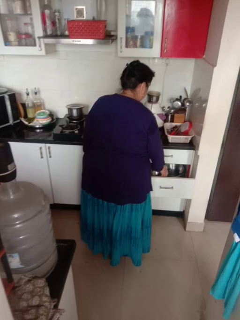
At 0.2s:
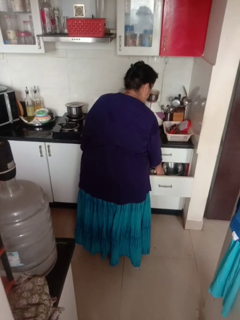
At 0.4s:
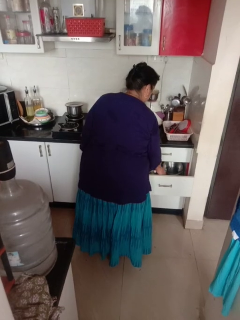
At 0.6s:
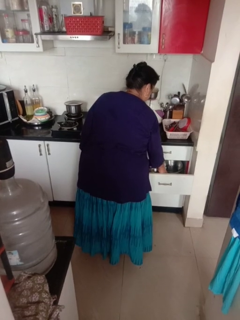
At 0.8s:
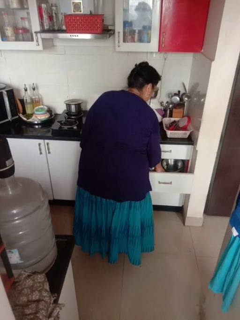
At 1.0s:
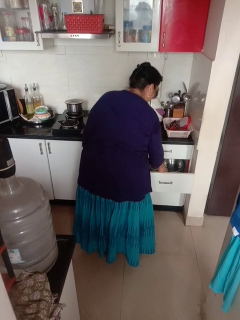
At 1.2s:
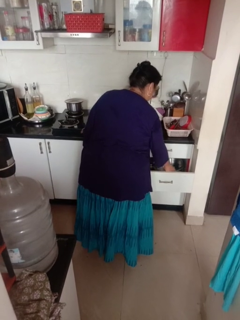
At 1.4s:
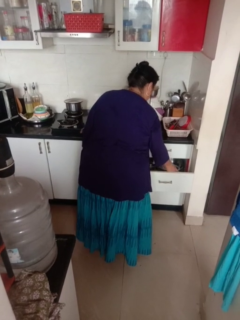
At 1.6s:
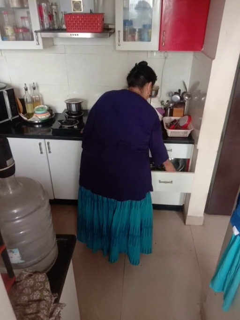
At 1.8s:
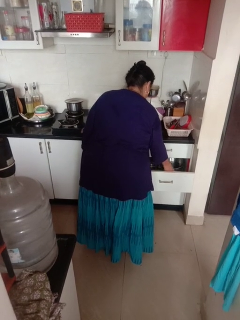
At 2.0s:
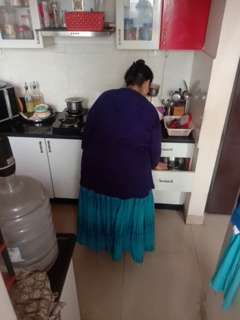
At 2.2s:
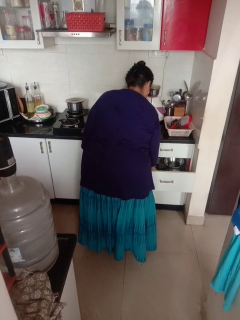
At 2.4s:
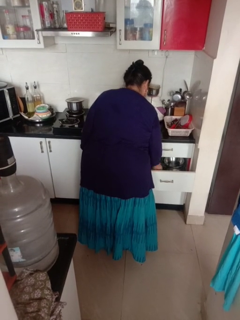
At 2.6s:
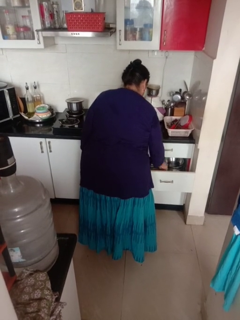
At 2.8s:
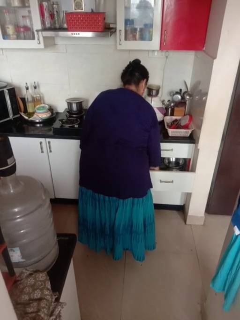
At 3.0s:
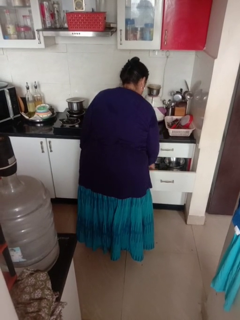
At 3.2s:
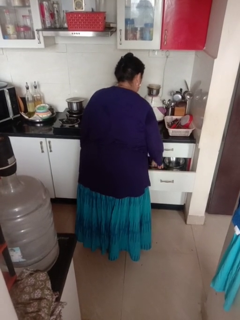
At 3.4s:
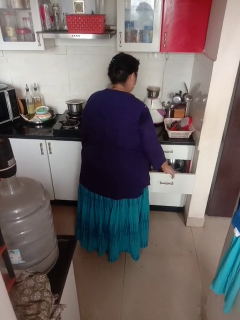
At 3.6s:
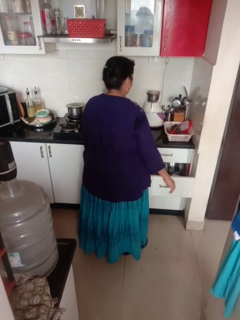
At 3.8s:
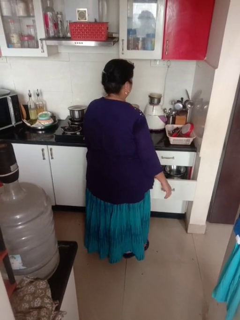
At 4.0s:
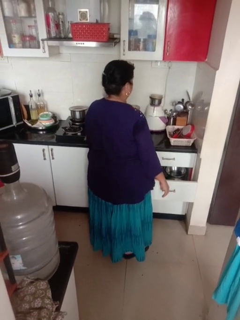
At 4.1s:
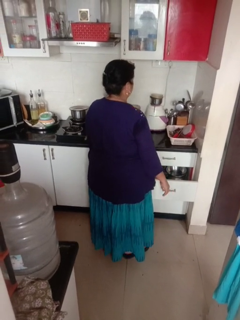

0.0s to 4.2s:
person searches in kitchen drawer

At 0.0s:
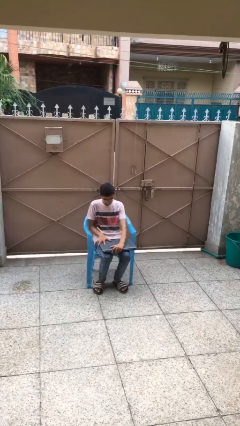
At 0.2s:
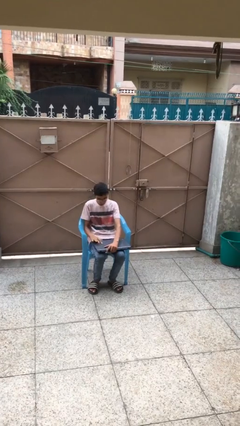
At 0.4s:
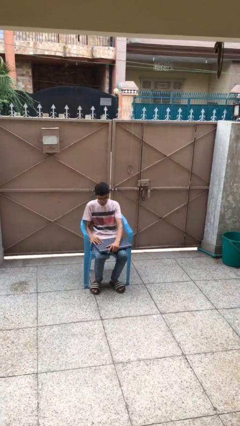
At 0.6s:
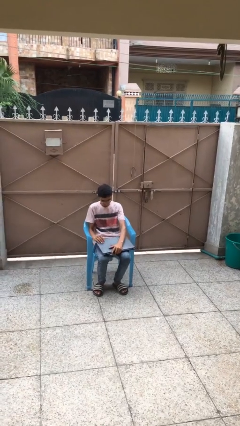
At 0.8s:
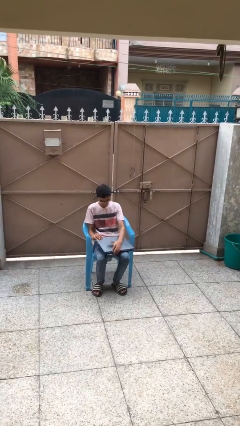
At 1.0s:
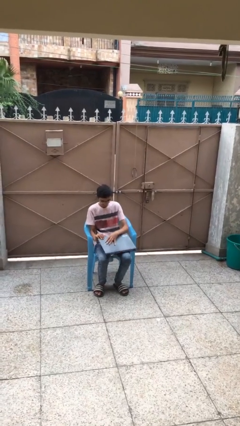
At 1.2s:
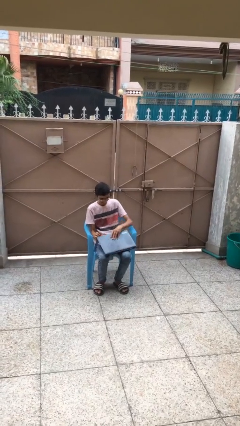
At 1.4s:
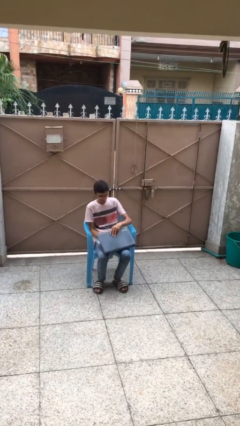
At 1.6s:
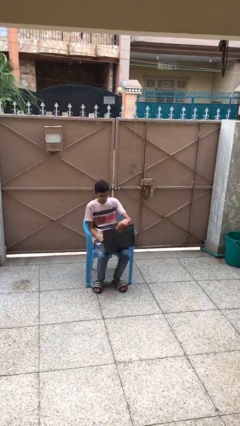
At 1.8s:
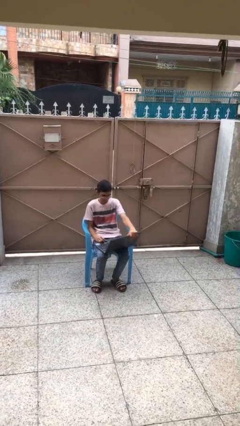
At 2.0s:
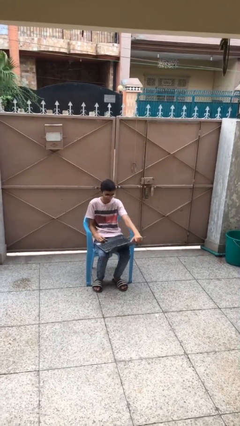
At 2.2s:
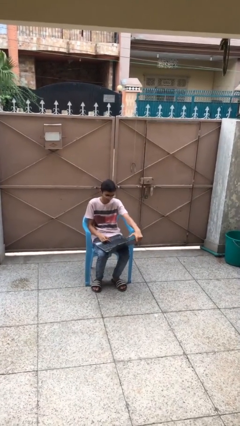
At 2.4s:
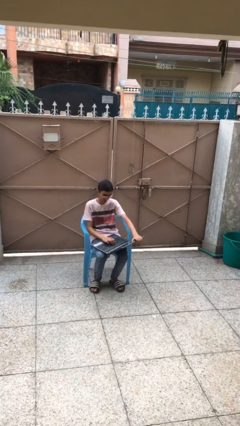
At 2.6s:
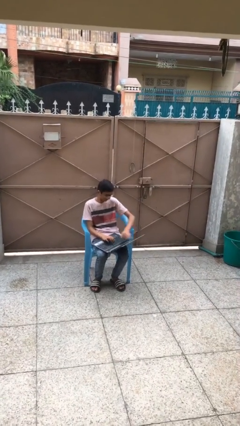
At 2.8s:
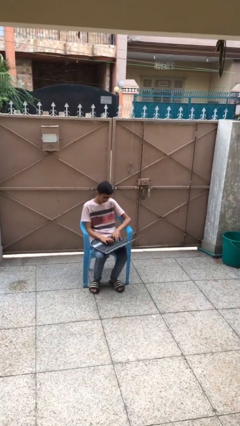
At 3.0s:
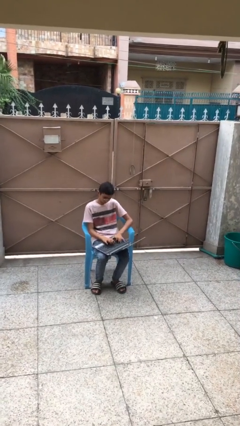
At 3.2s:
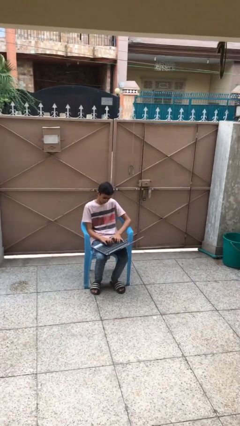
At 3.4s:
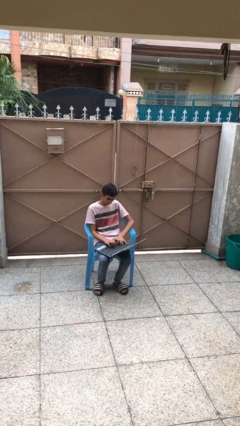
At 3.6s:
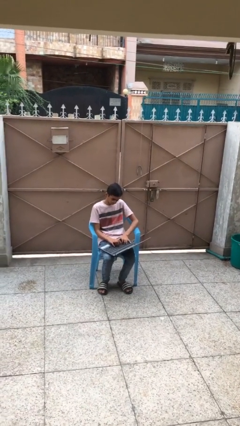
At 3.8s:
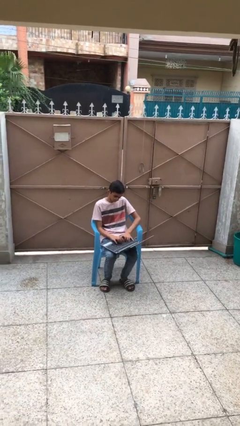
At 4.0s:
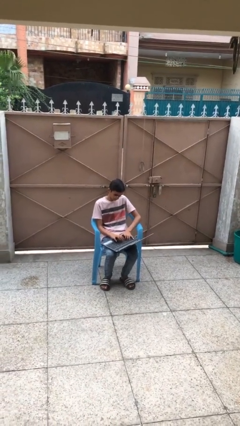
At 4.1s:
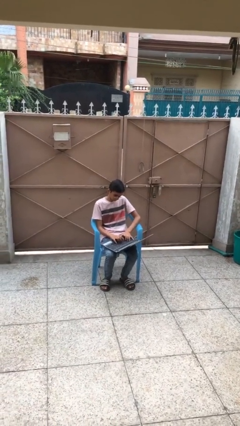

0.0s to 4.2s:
person interacts with laptop

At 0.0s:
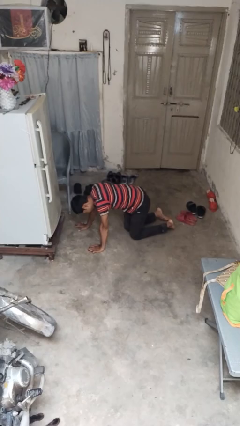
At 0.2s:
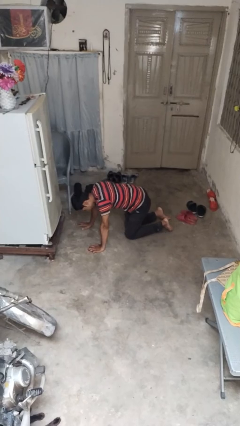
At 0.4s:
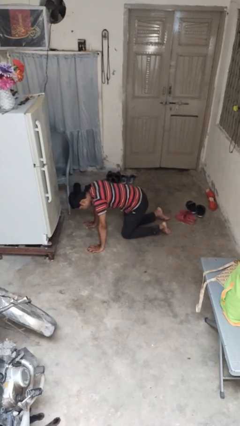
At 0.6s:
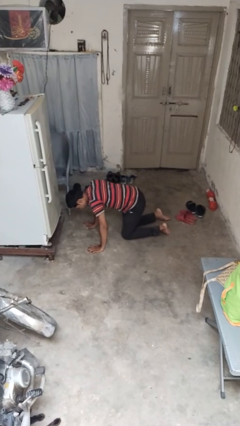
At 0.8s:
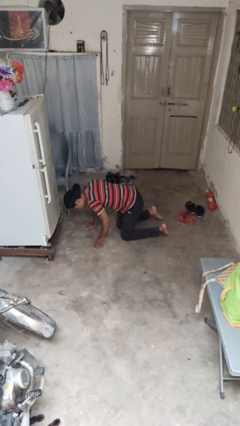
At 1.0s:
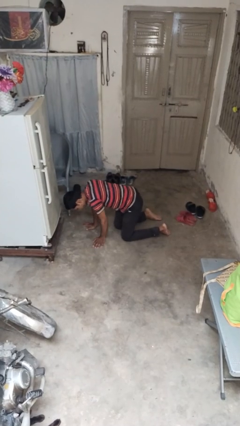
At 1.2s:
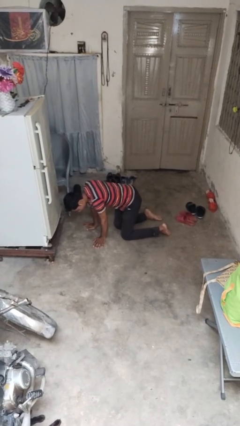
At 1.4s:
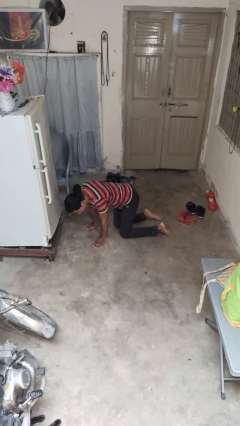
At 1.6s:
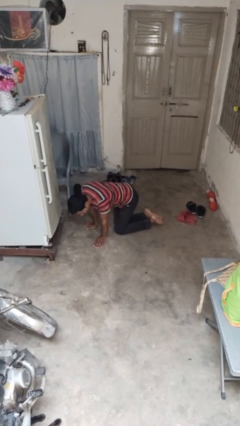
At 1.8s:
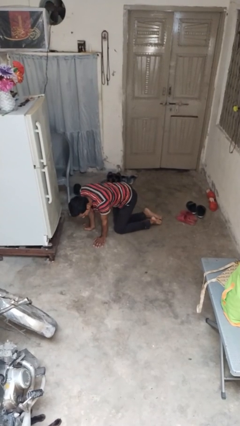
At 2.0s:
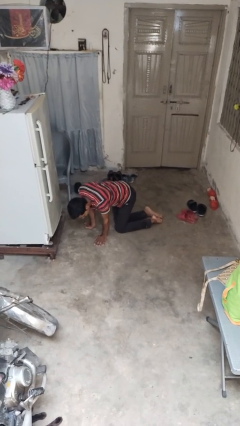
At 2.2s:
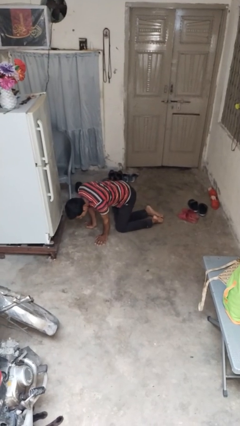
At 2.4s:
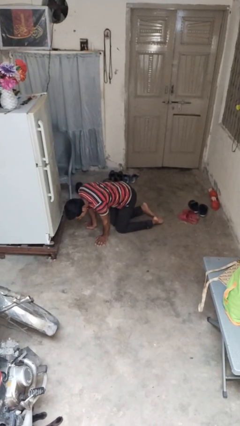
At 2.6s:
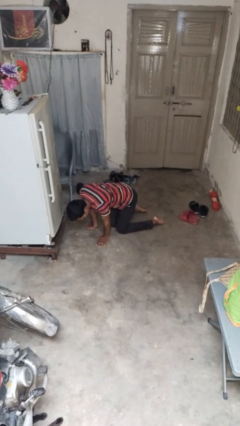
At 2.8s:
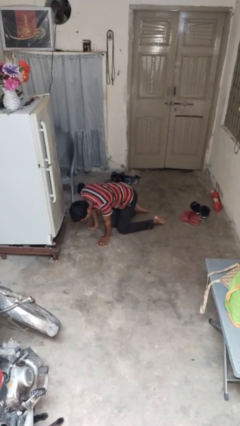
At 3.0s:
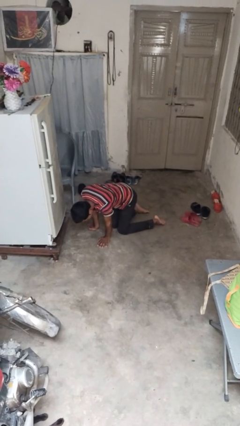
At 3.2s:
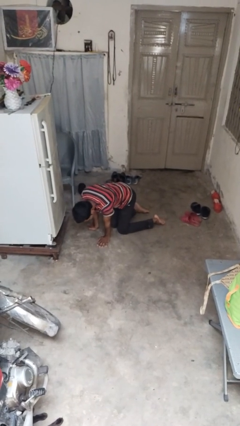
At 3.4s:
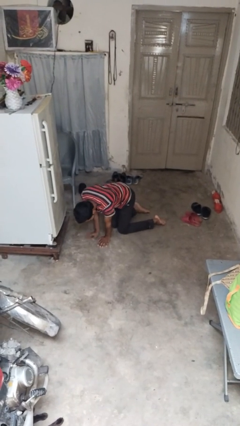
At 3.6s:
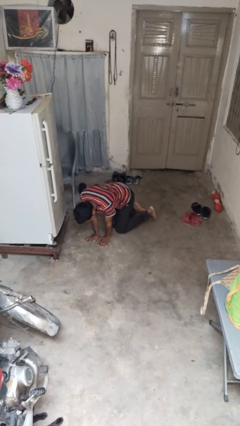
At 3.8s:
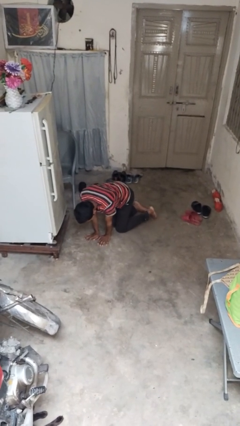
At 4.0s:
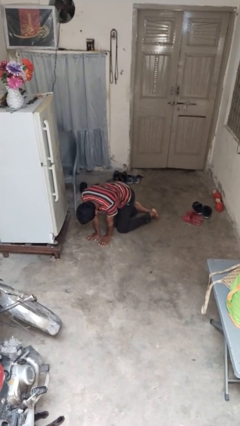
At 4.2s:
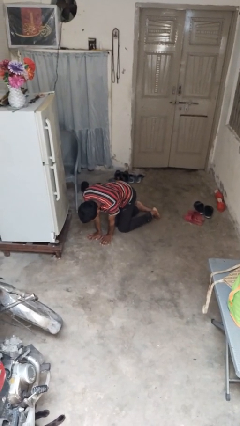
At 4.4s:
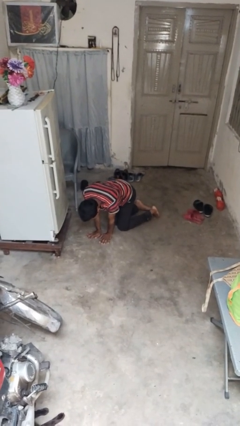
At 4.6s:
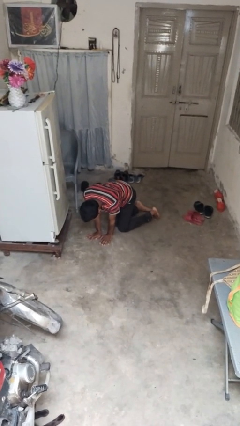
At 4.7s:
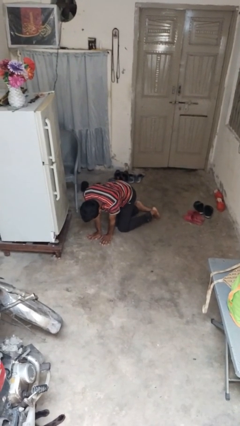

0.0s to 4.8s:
person crawls

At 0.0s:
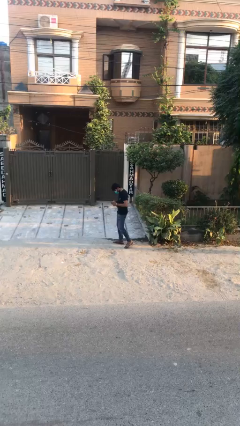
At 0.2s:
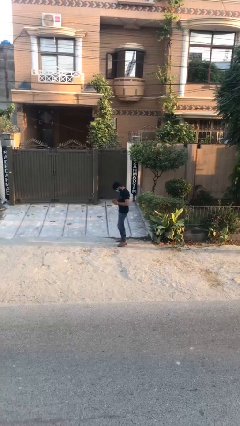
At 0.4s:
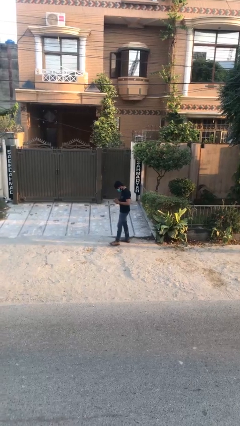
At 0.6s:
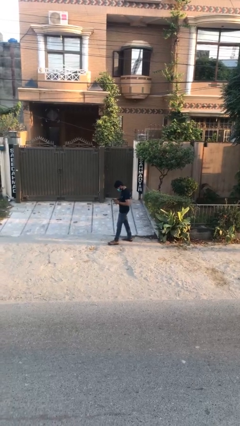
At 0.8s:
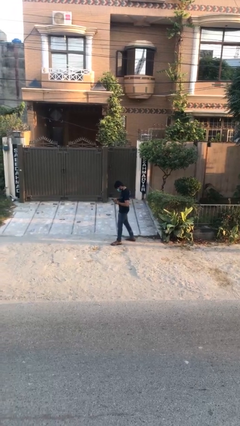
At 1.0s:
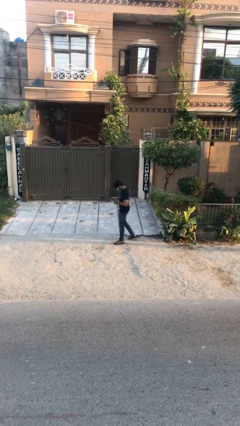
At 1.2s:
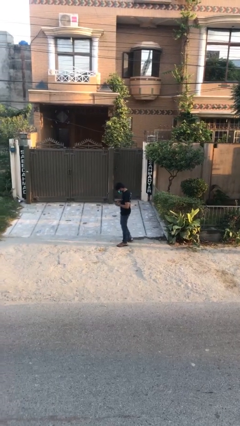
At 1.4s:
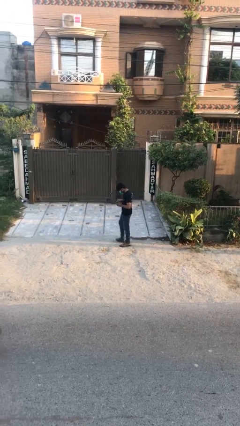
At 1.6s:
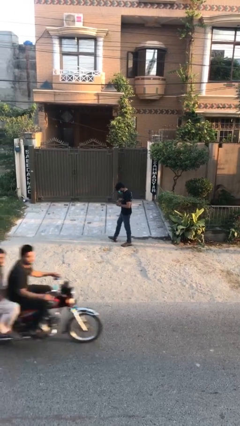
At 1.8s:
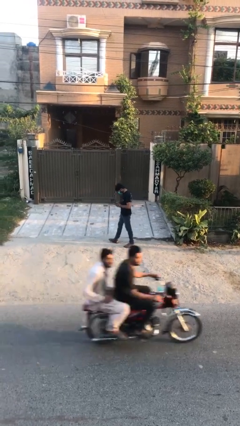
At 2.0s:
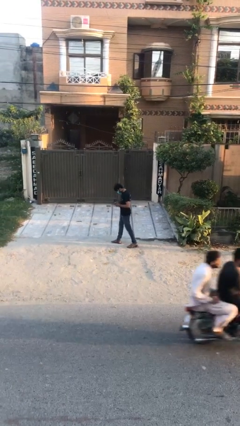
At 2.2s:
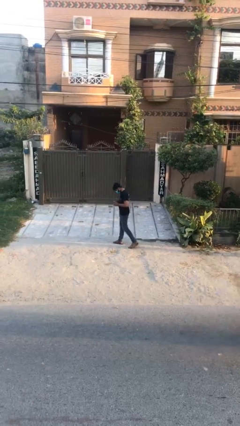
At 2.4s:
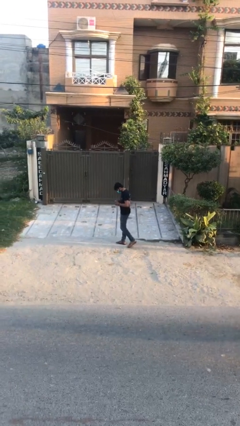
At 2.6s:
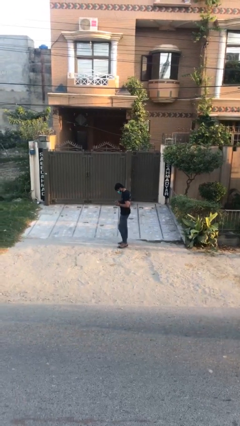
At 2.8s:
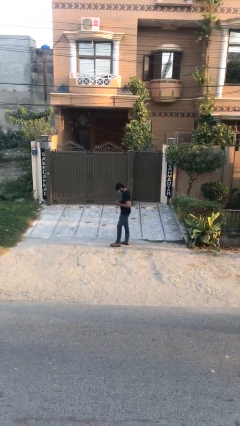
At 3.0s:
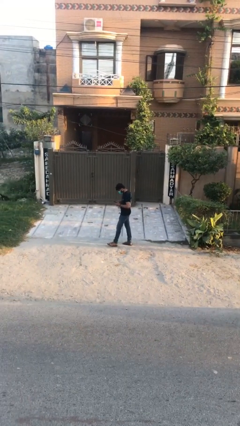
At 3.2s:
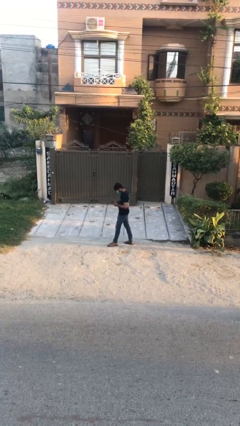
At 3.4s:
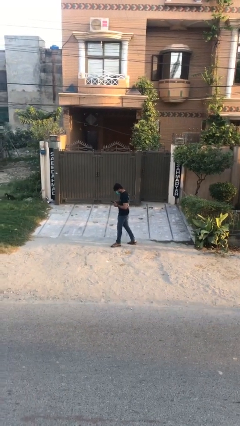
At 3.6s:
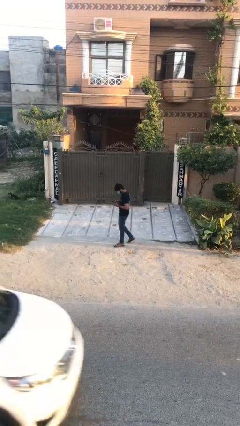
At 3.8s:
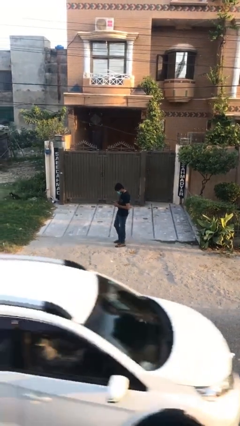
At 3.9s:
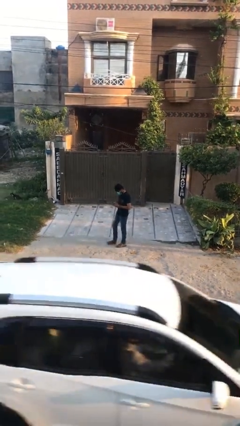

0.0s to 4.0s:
person texts on phone

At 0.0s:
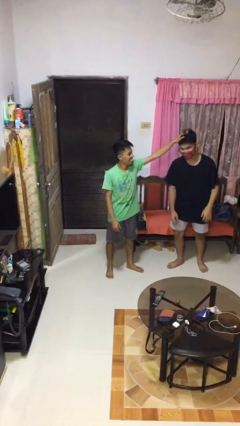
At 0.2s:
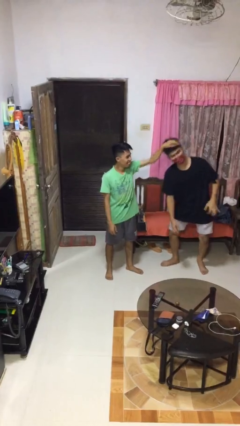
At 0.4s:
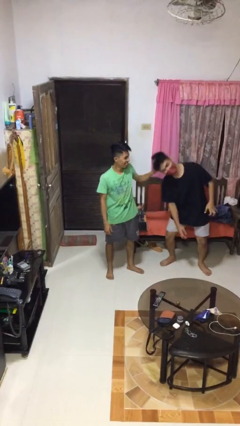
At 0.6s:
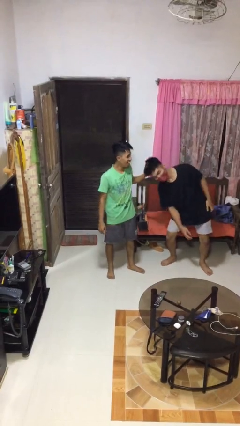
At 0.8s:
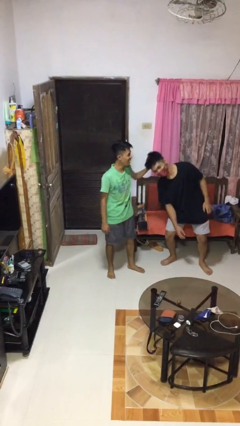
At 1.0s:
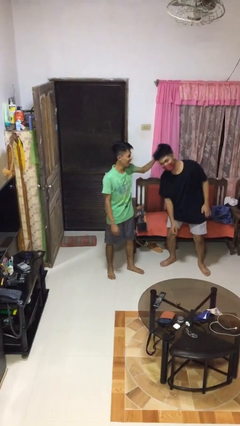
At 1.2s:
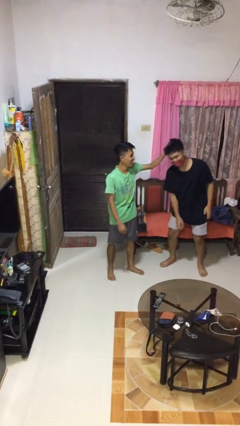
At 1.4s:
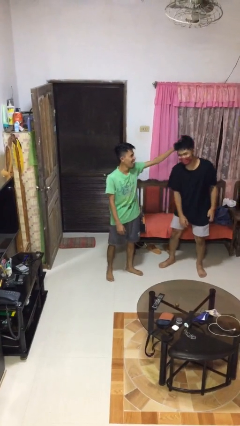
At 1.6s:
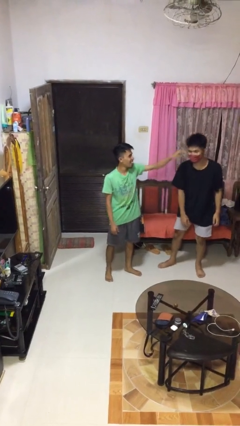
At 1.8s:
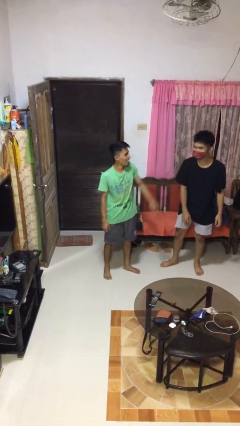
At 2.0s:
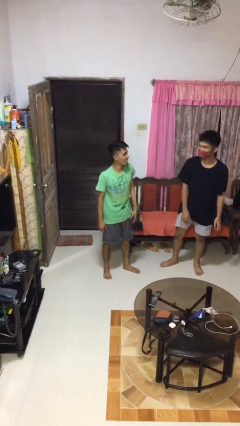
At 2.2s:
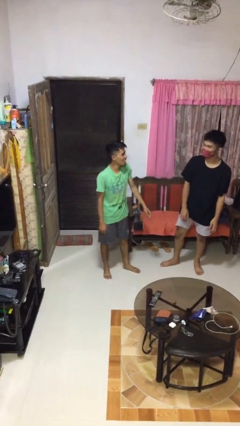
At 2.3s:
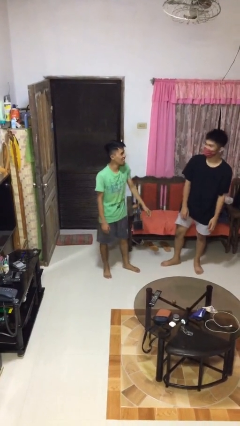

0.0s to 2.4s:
person grabs person by hair
